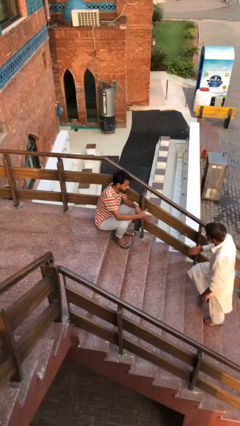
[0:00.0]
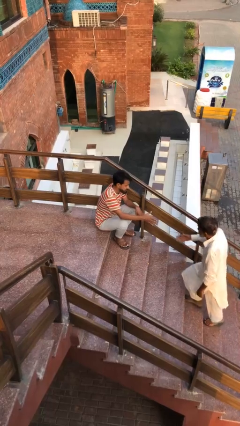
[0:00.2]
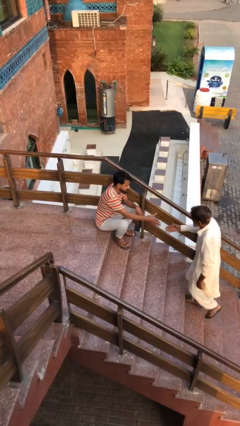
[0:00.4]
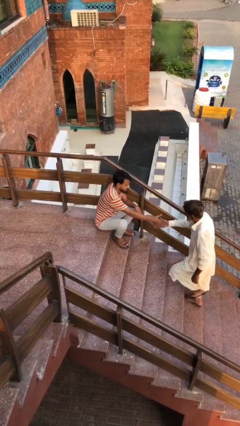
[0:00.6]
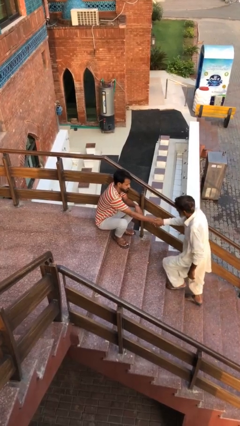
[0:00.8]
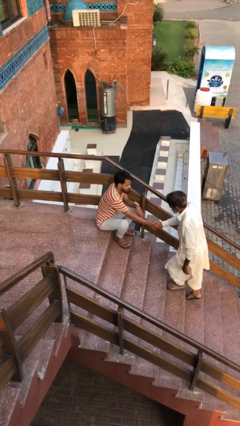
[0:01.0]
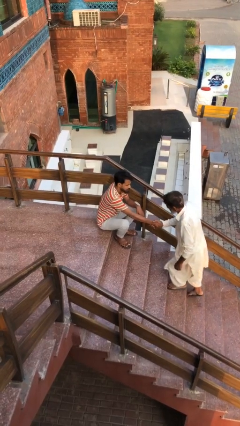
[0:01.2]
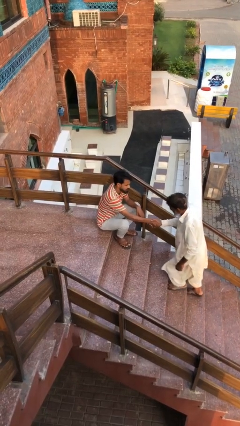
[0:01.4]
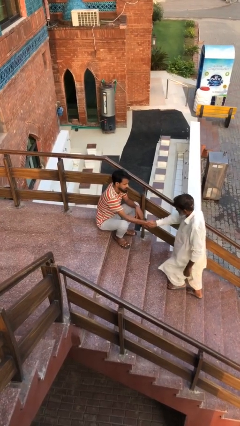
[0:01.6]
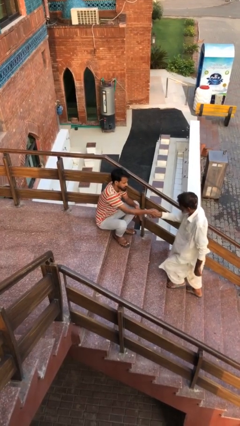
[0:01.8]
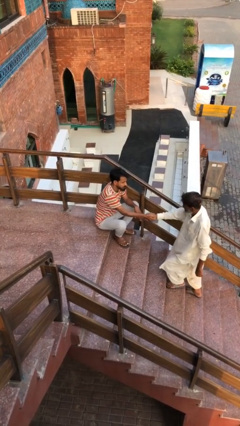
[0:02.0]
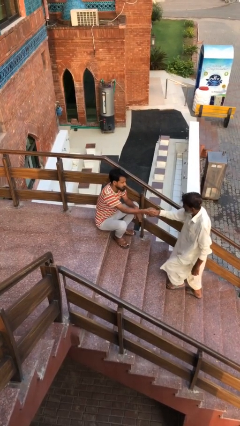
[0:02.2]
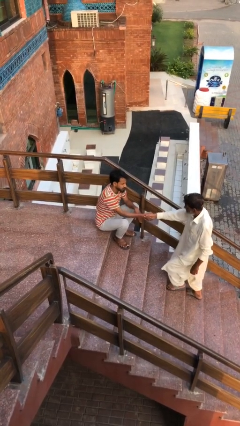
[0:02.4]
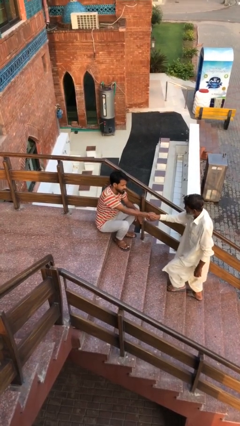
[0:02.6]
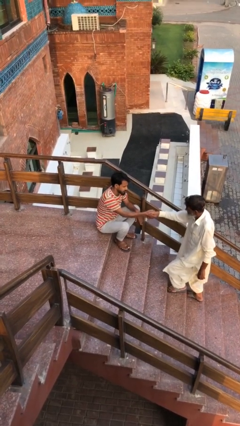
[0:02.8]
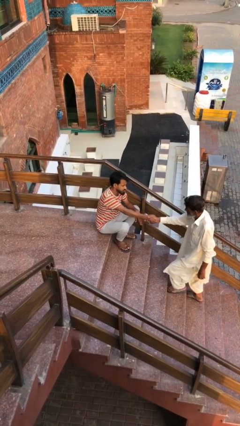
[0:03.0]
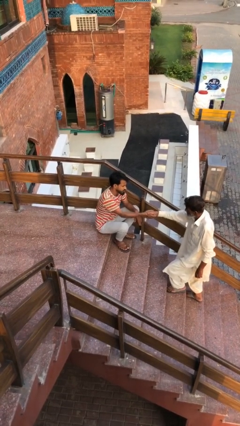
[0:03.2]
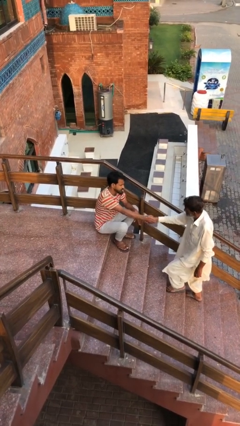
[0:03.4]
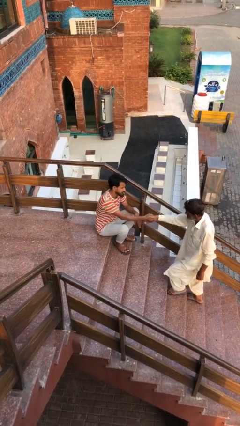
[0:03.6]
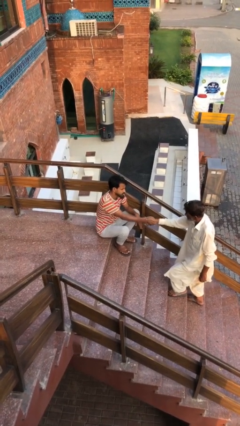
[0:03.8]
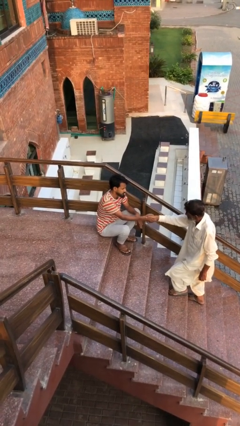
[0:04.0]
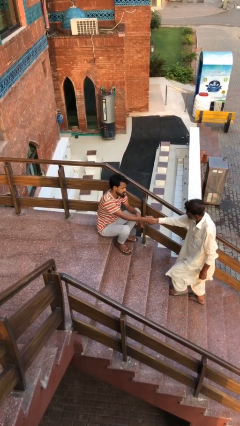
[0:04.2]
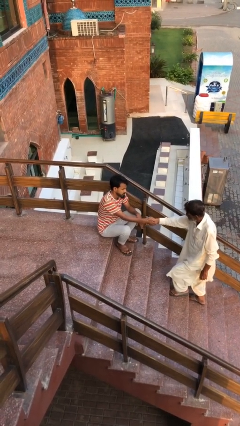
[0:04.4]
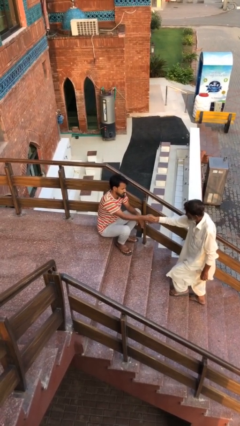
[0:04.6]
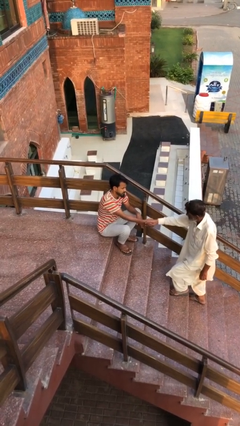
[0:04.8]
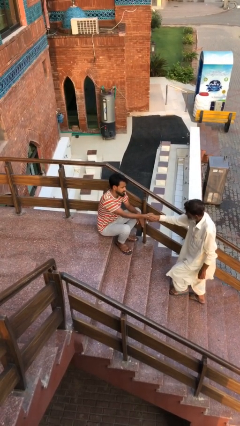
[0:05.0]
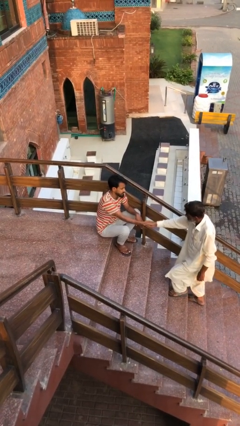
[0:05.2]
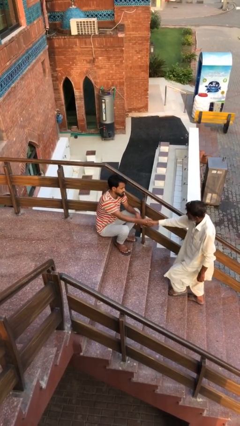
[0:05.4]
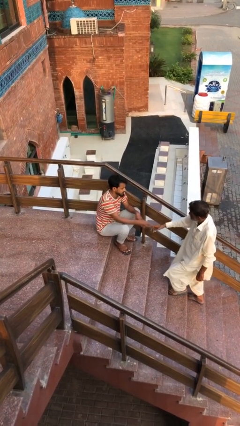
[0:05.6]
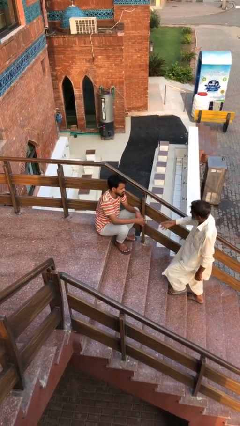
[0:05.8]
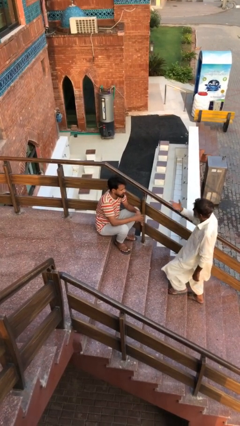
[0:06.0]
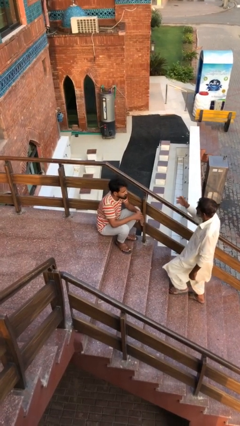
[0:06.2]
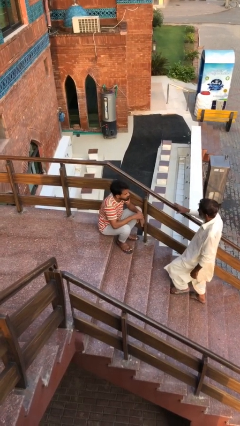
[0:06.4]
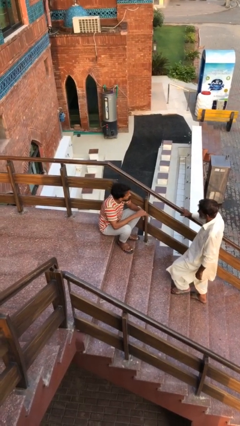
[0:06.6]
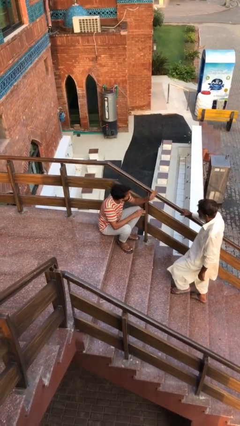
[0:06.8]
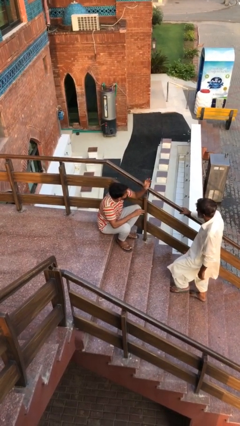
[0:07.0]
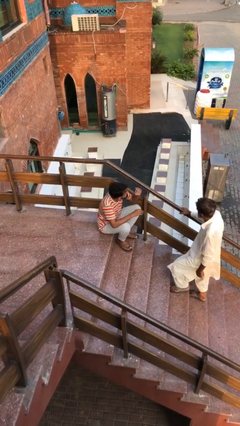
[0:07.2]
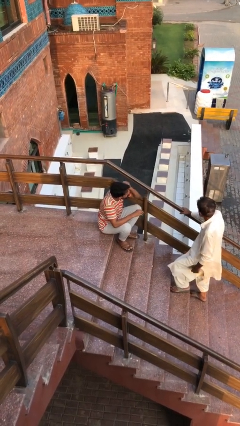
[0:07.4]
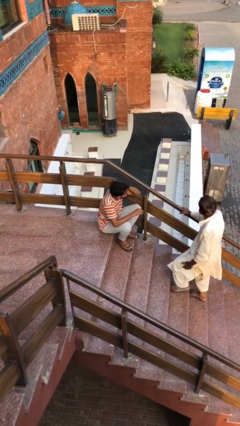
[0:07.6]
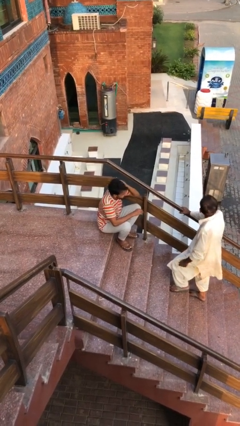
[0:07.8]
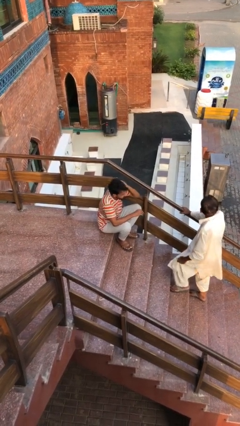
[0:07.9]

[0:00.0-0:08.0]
person shakes hand

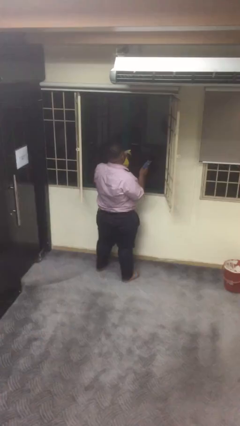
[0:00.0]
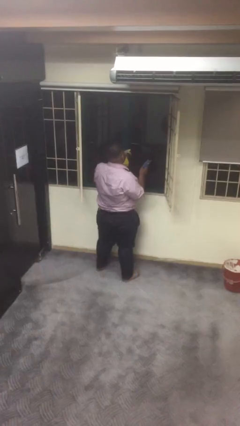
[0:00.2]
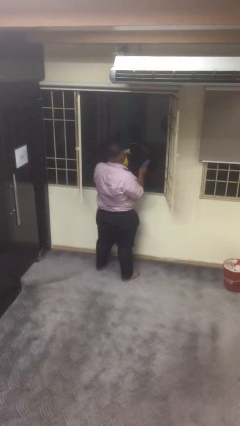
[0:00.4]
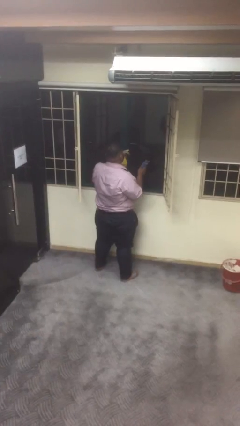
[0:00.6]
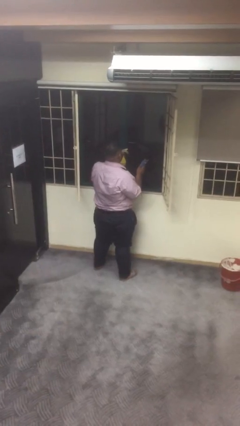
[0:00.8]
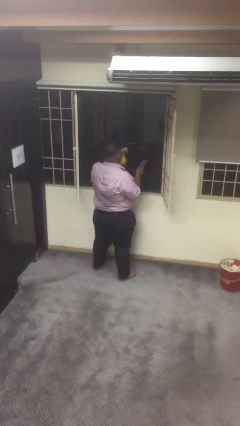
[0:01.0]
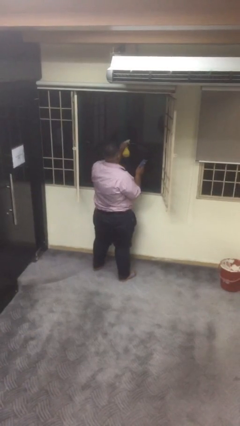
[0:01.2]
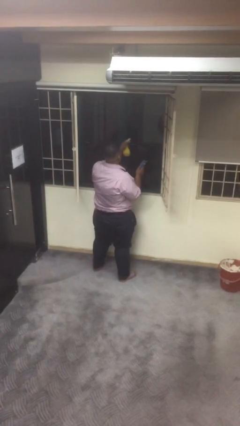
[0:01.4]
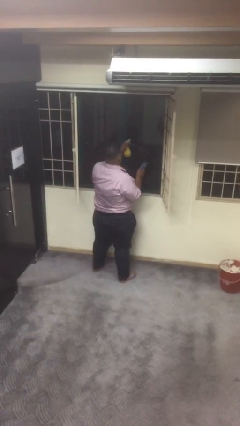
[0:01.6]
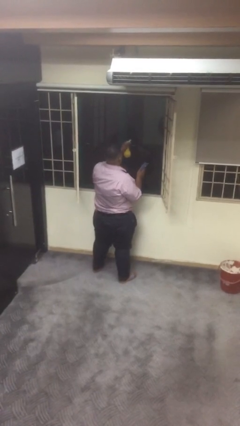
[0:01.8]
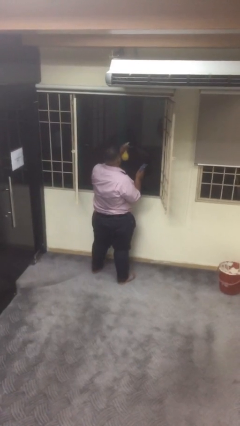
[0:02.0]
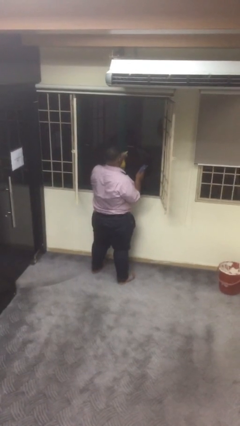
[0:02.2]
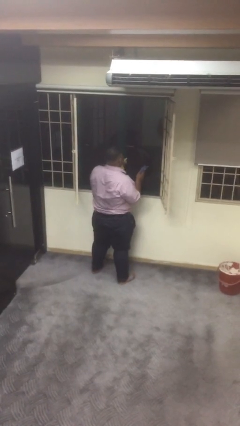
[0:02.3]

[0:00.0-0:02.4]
person sprays from bottle

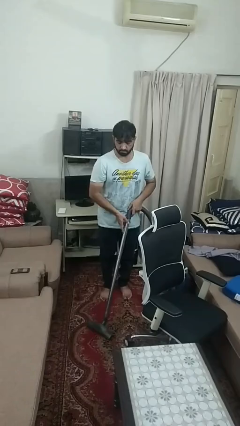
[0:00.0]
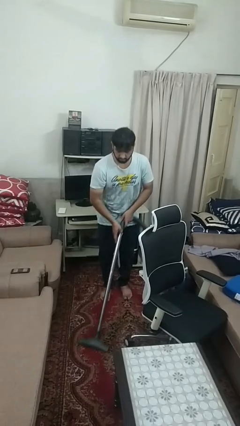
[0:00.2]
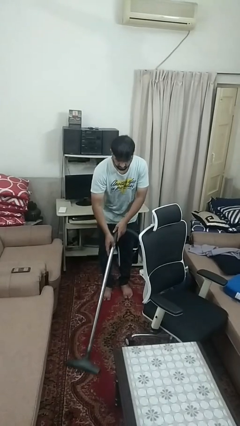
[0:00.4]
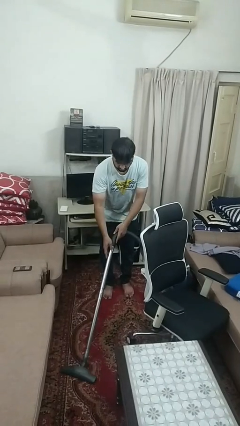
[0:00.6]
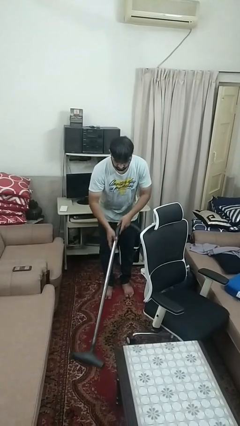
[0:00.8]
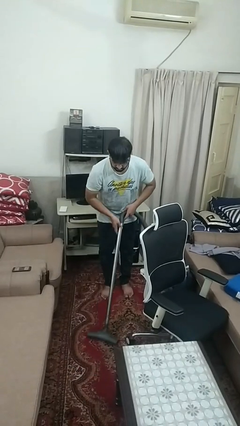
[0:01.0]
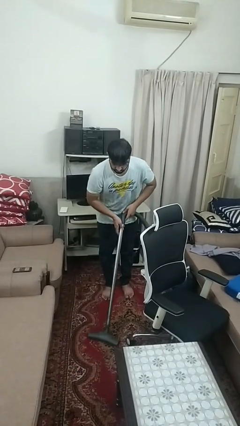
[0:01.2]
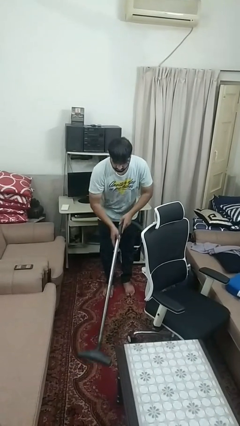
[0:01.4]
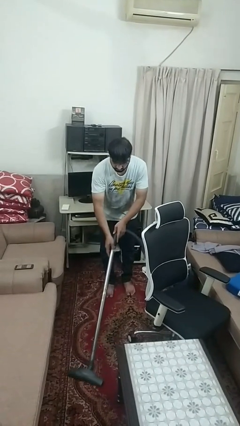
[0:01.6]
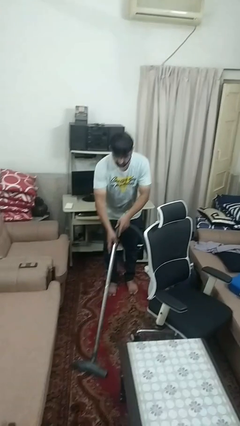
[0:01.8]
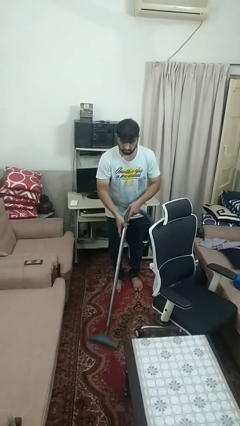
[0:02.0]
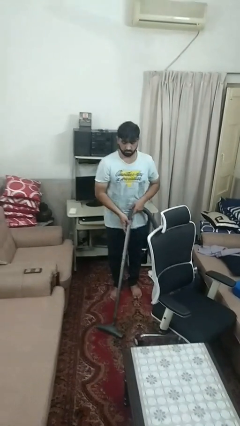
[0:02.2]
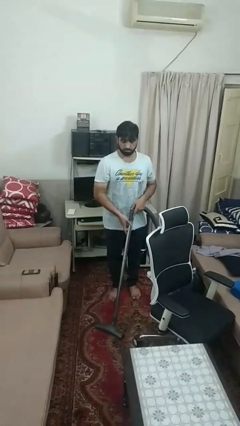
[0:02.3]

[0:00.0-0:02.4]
person vacuums carpet

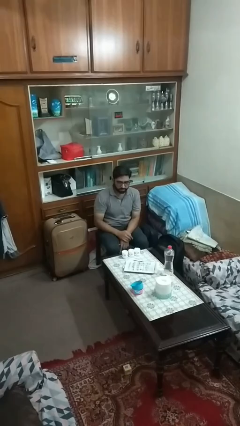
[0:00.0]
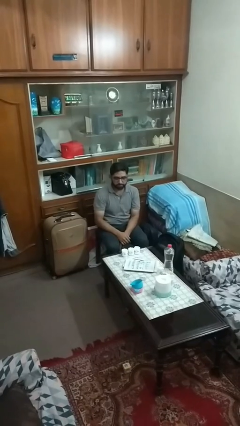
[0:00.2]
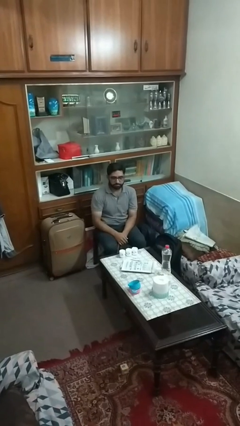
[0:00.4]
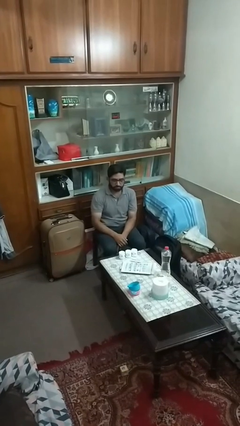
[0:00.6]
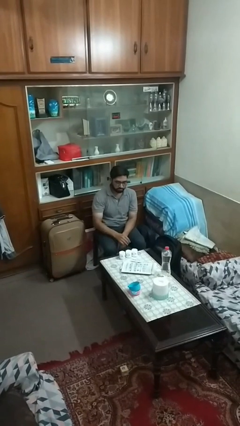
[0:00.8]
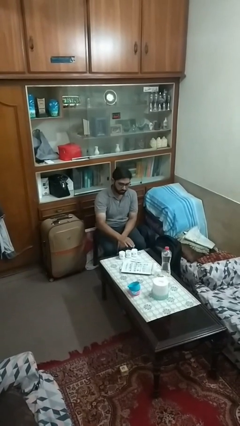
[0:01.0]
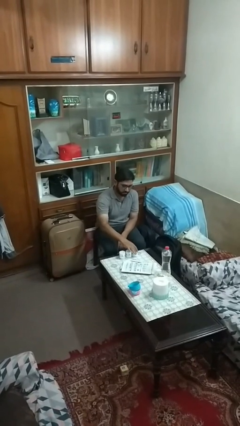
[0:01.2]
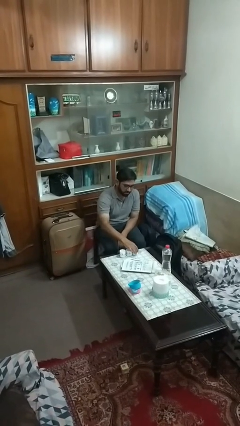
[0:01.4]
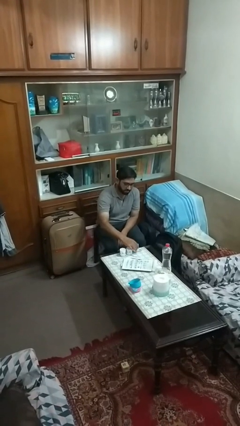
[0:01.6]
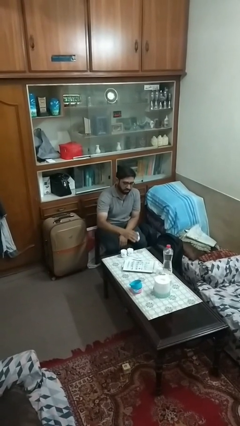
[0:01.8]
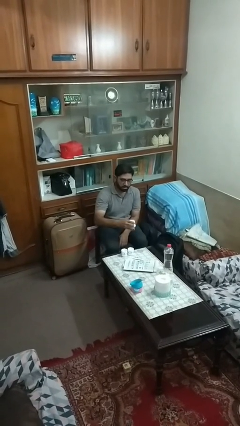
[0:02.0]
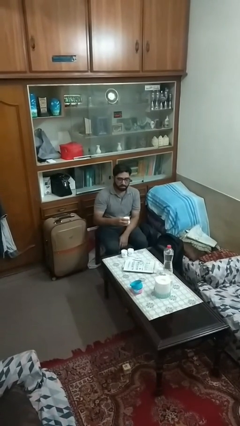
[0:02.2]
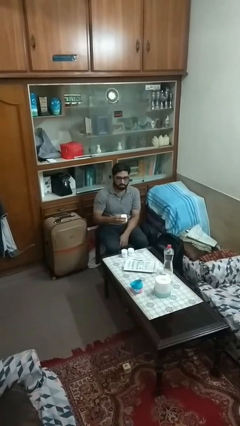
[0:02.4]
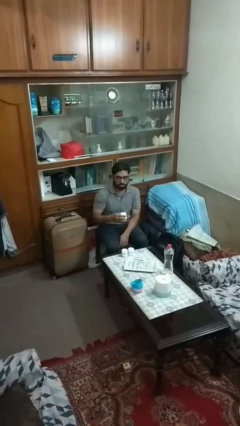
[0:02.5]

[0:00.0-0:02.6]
person picks up object from table

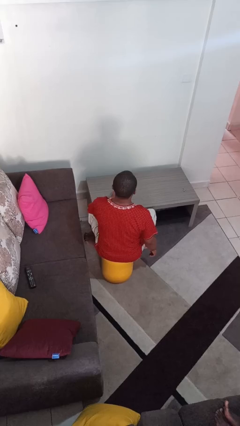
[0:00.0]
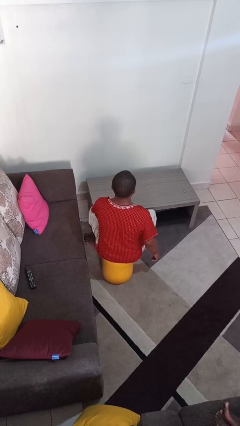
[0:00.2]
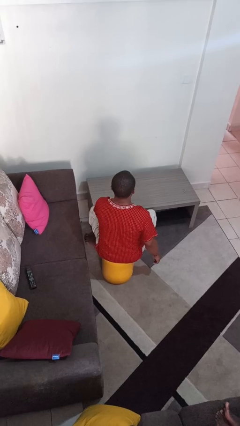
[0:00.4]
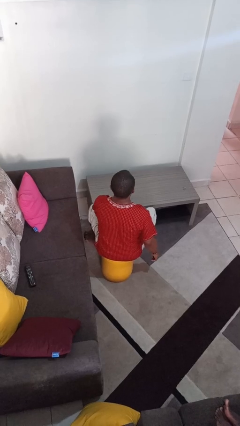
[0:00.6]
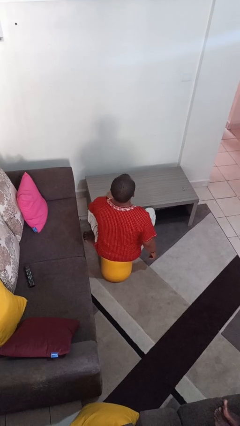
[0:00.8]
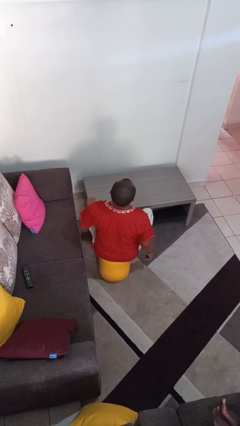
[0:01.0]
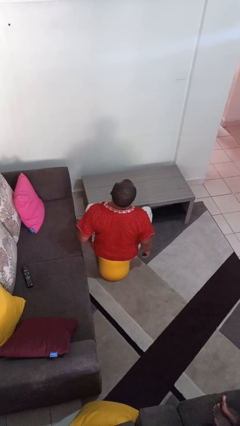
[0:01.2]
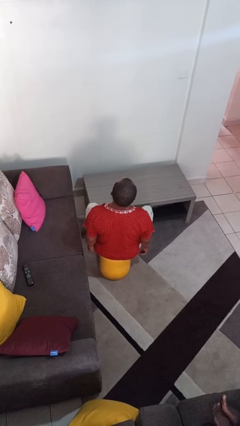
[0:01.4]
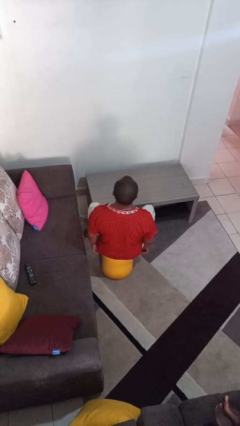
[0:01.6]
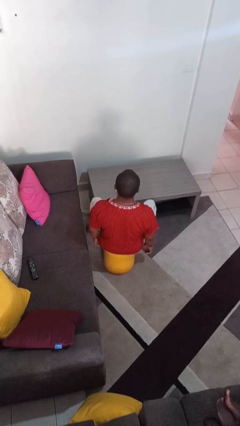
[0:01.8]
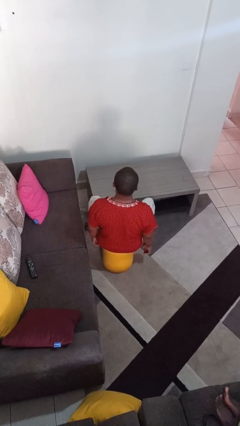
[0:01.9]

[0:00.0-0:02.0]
person puts down object on table

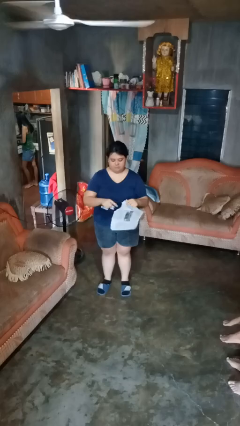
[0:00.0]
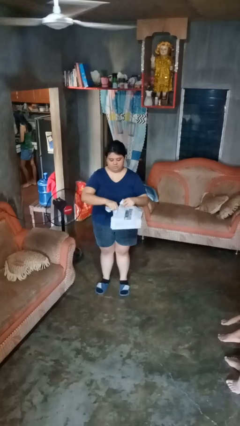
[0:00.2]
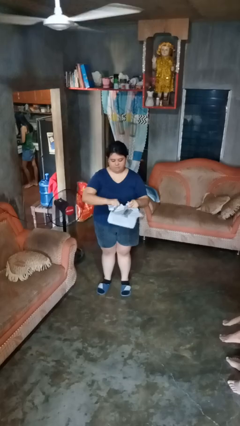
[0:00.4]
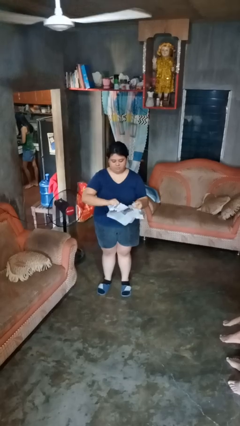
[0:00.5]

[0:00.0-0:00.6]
person tears paper
